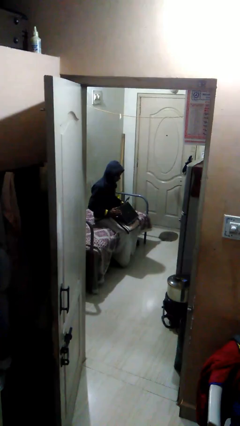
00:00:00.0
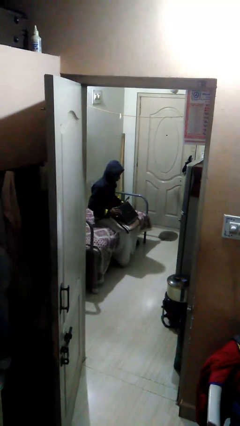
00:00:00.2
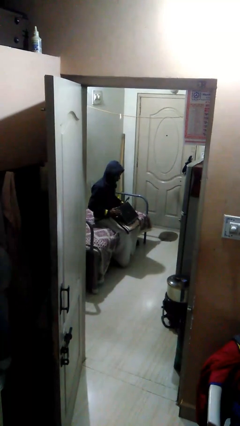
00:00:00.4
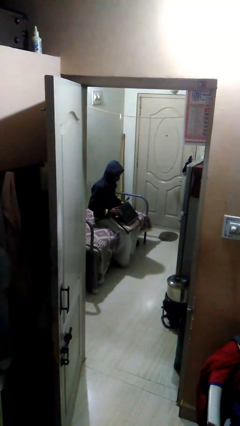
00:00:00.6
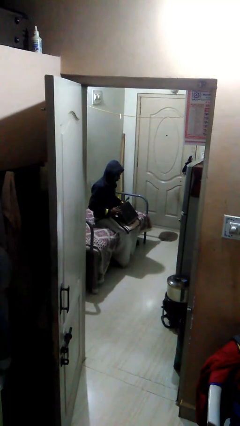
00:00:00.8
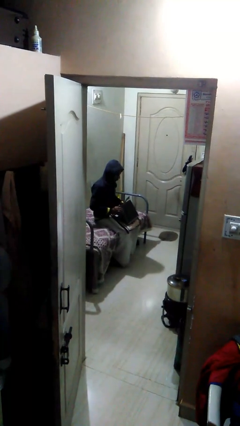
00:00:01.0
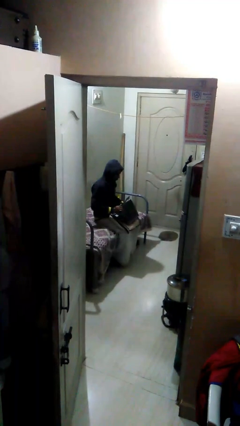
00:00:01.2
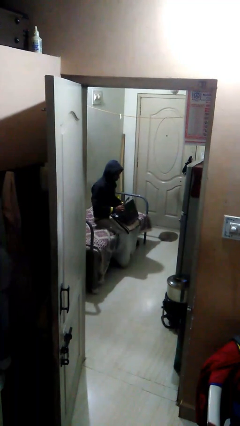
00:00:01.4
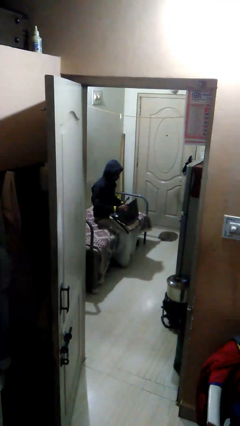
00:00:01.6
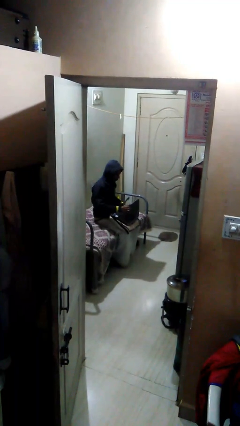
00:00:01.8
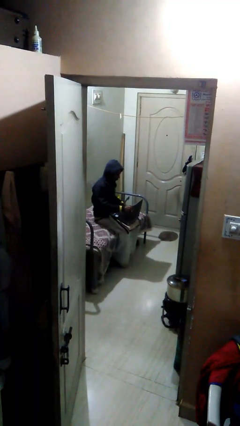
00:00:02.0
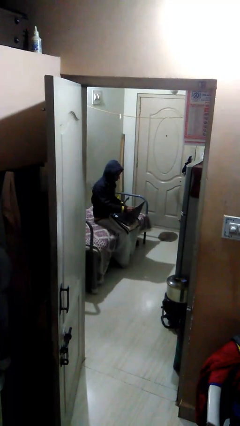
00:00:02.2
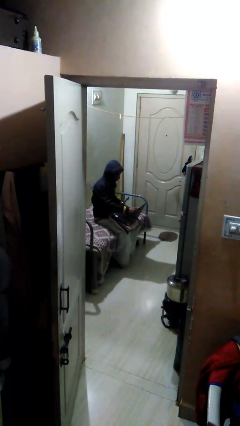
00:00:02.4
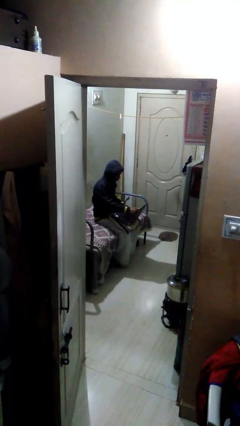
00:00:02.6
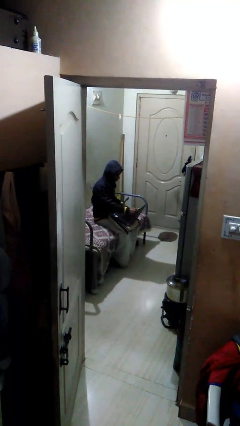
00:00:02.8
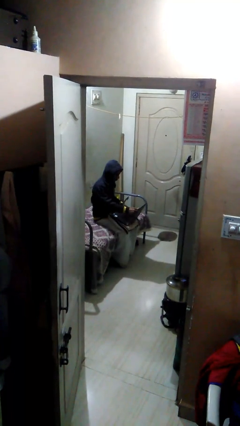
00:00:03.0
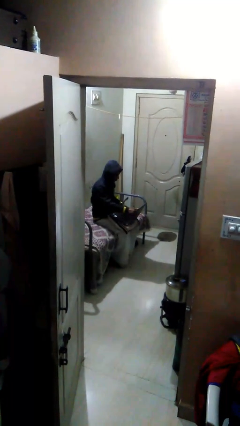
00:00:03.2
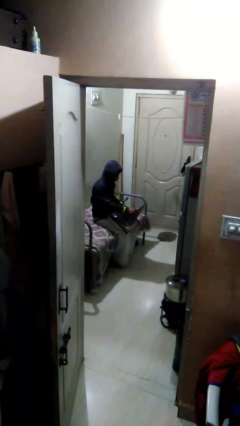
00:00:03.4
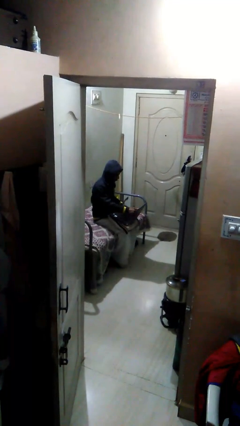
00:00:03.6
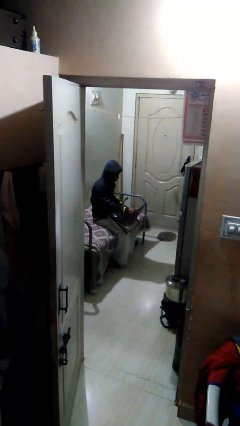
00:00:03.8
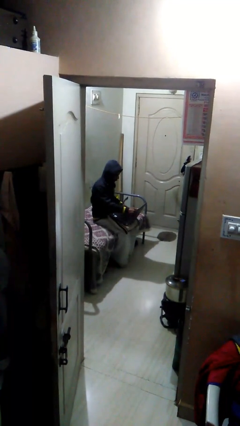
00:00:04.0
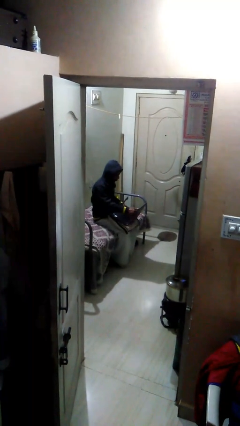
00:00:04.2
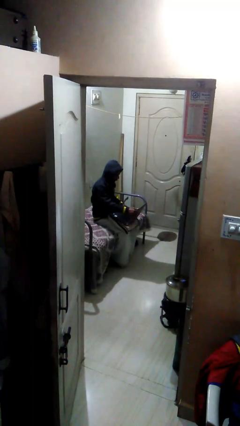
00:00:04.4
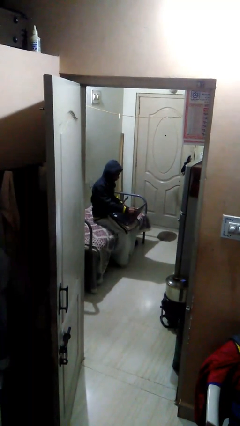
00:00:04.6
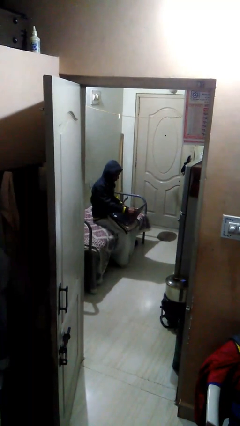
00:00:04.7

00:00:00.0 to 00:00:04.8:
person interacts with laptop

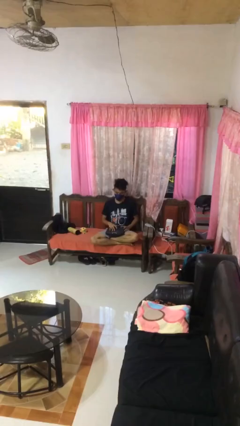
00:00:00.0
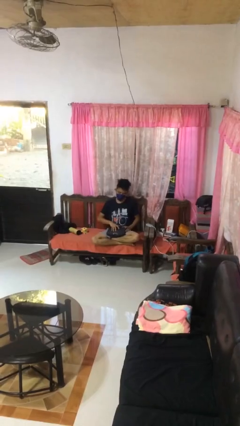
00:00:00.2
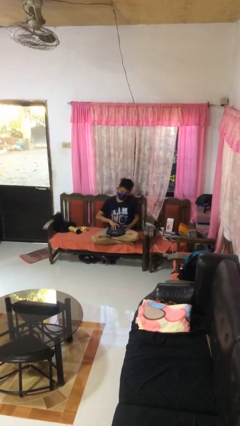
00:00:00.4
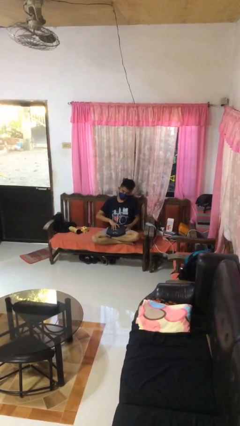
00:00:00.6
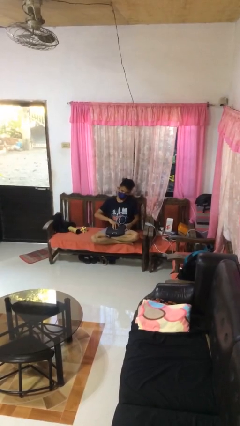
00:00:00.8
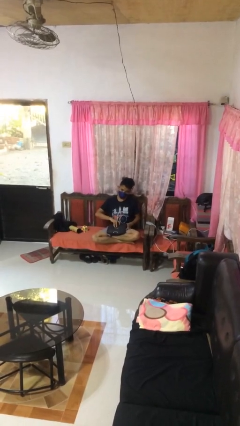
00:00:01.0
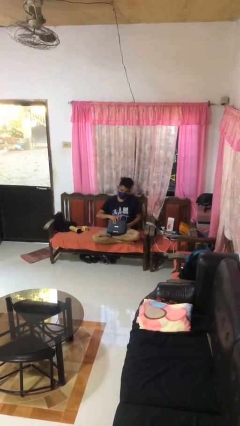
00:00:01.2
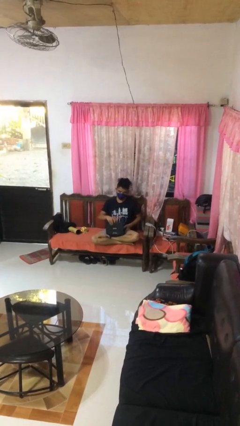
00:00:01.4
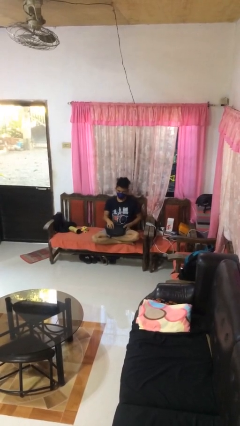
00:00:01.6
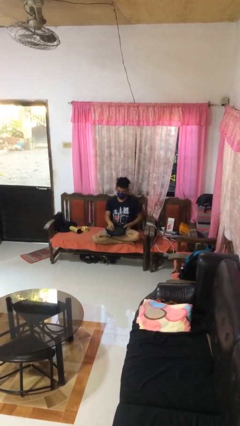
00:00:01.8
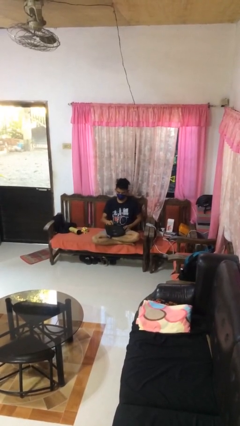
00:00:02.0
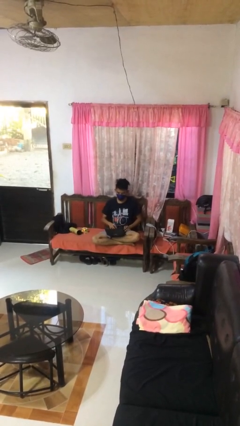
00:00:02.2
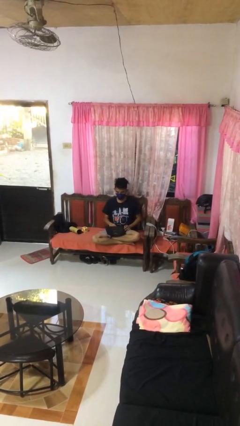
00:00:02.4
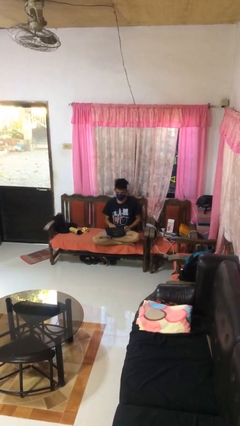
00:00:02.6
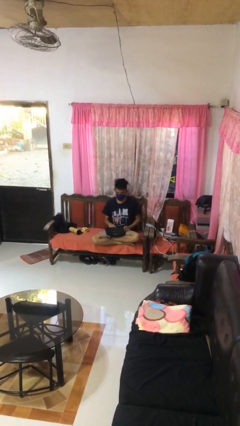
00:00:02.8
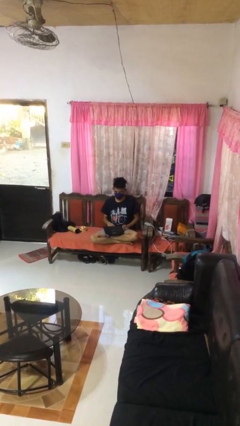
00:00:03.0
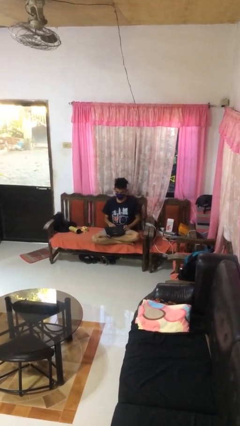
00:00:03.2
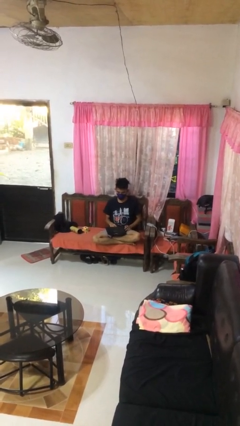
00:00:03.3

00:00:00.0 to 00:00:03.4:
person opens laptop

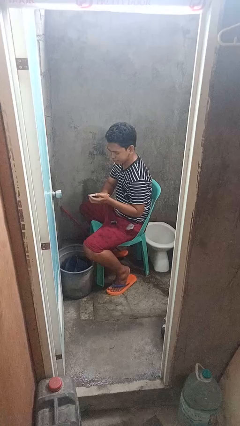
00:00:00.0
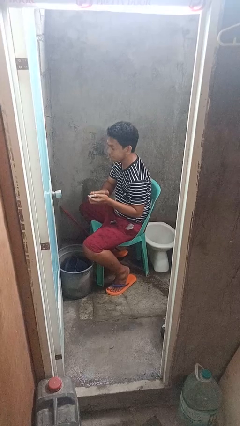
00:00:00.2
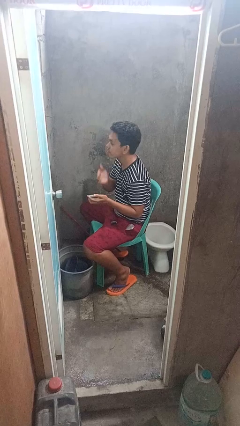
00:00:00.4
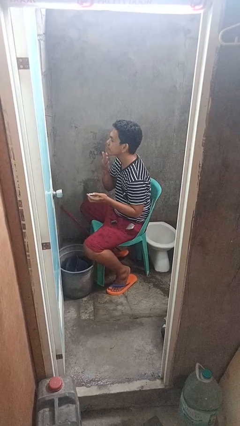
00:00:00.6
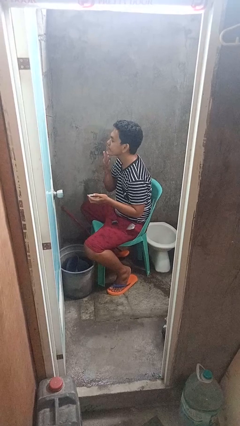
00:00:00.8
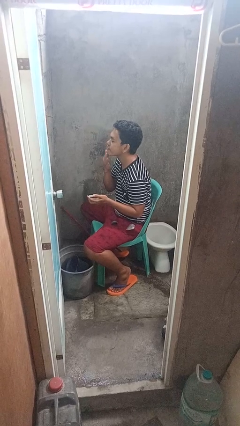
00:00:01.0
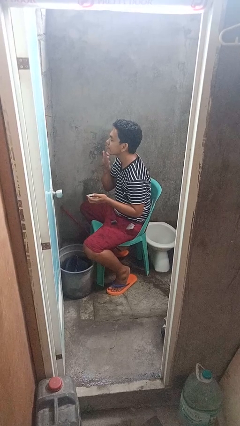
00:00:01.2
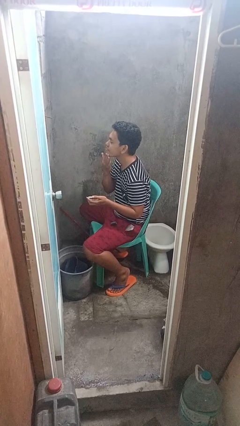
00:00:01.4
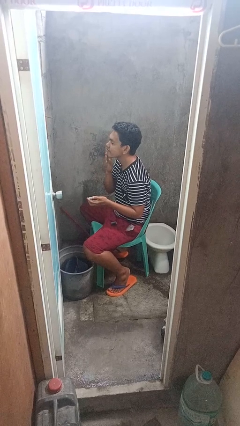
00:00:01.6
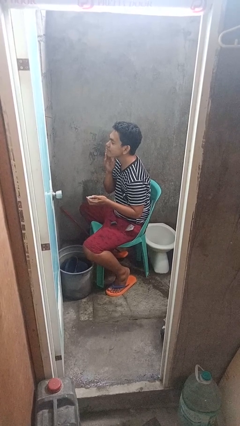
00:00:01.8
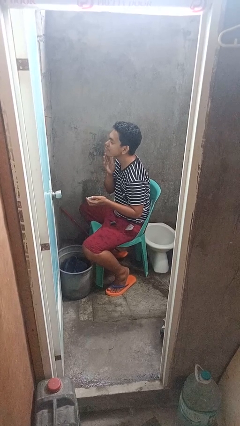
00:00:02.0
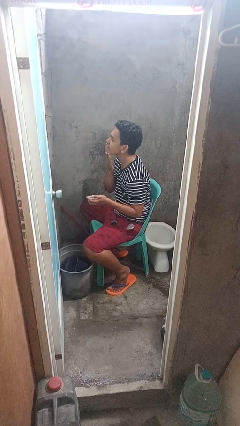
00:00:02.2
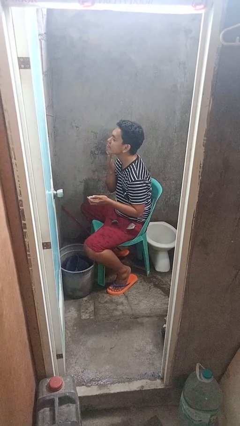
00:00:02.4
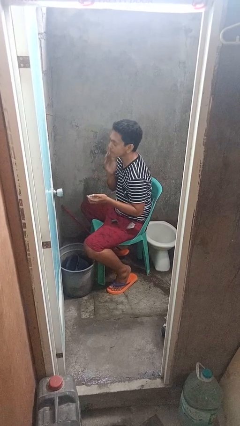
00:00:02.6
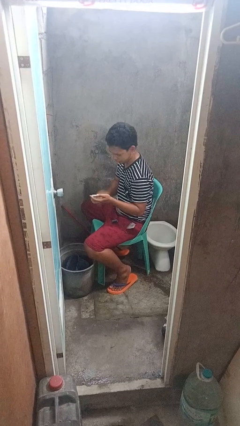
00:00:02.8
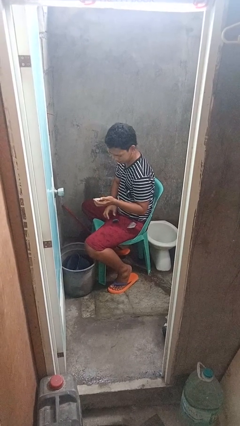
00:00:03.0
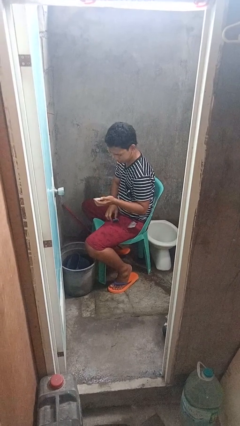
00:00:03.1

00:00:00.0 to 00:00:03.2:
person applies shaving cream

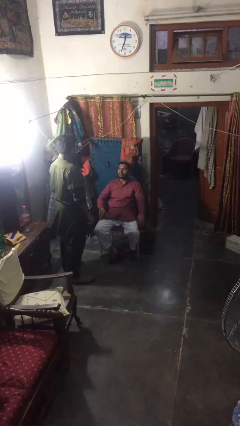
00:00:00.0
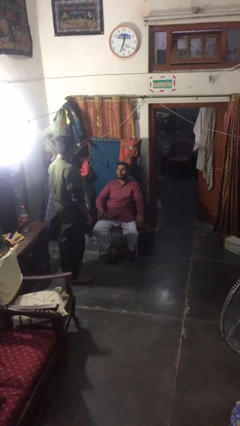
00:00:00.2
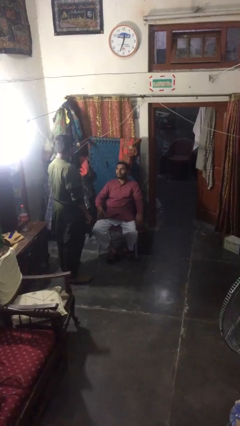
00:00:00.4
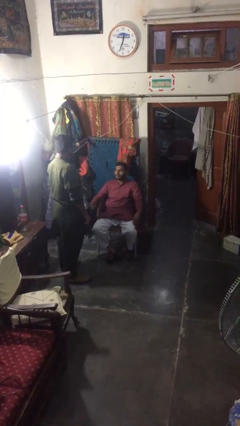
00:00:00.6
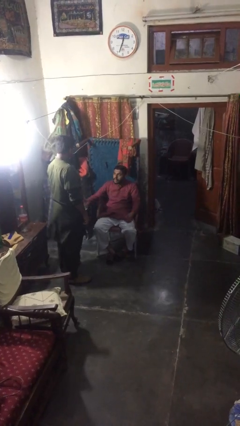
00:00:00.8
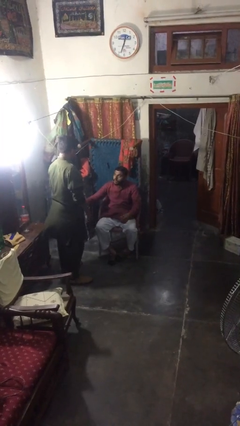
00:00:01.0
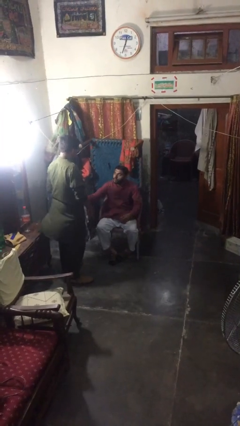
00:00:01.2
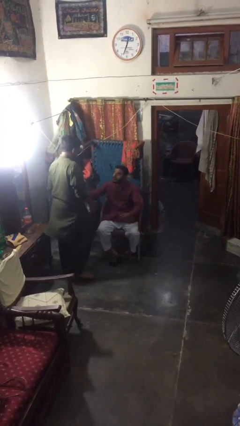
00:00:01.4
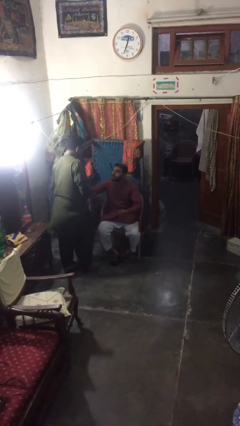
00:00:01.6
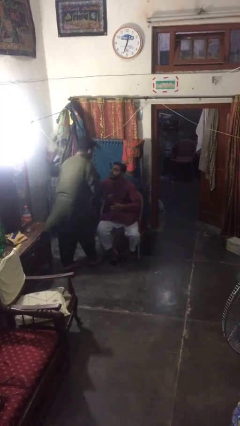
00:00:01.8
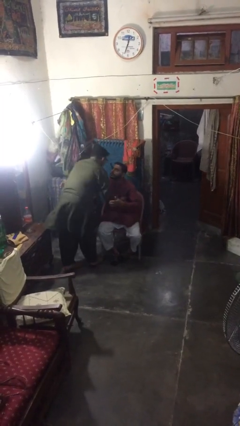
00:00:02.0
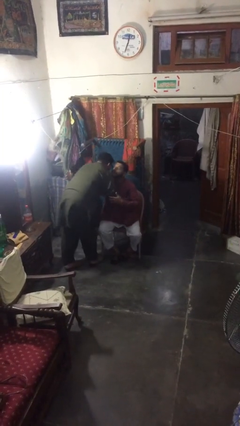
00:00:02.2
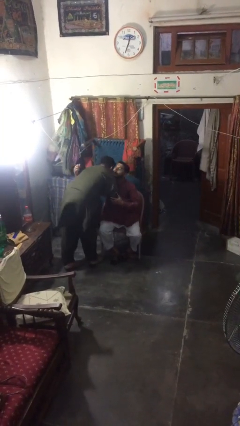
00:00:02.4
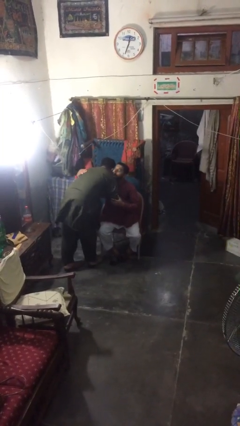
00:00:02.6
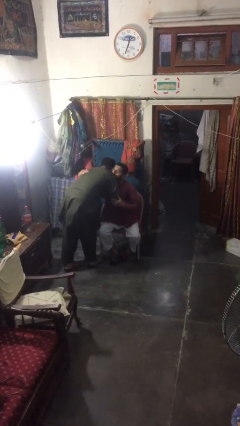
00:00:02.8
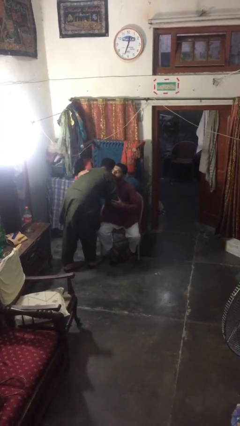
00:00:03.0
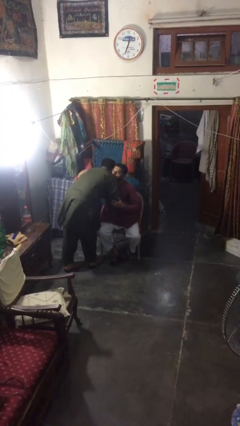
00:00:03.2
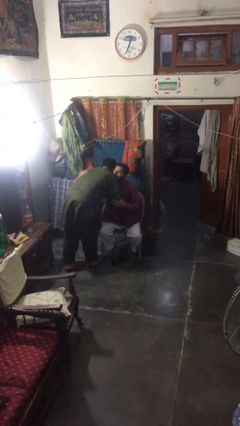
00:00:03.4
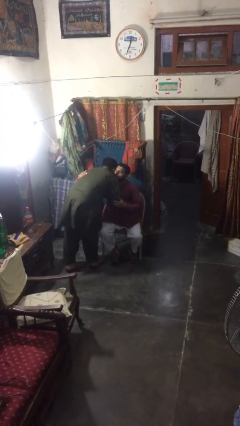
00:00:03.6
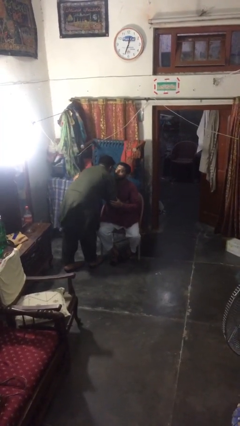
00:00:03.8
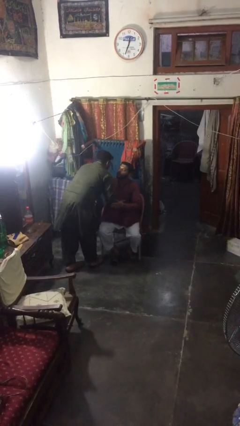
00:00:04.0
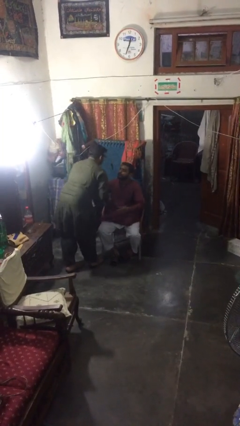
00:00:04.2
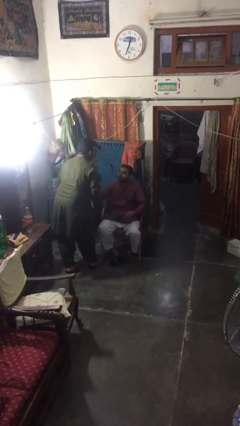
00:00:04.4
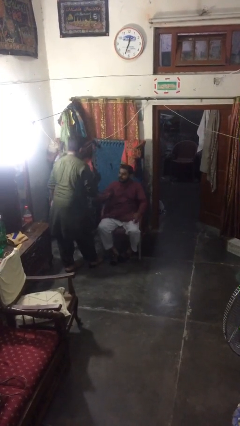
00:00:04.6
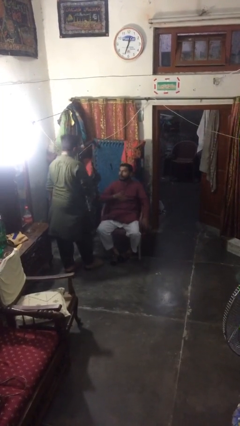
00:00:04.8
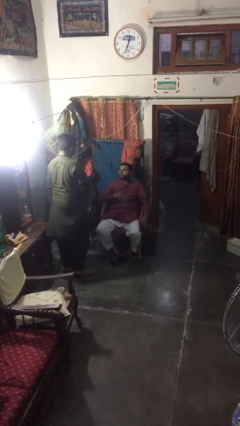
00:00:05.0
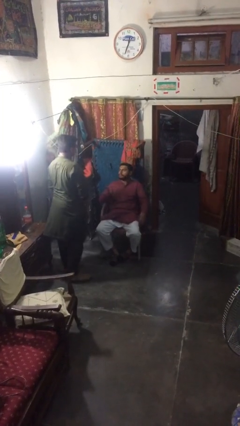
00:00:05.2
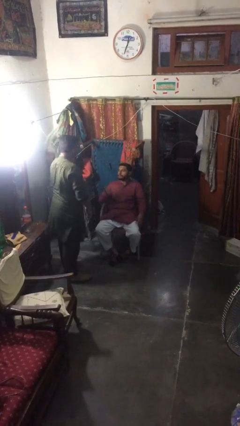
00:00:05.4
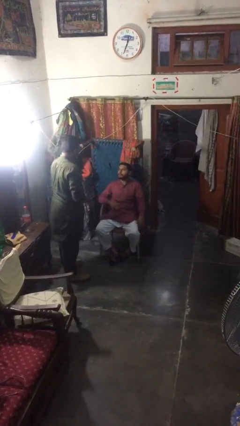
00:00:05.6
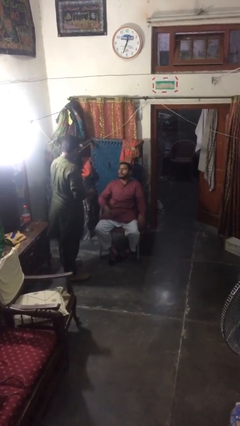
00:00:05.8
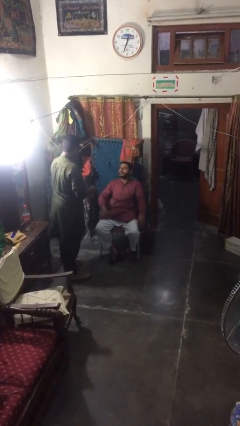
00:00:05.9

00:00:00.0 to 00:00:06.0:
person embraces person

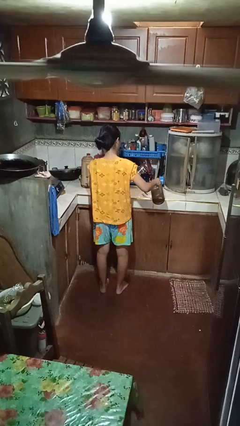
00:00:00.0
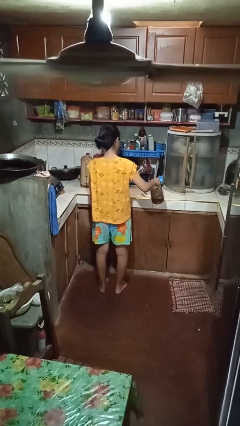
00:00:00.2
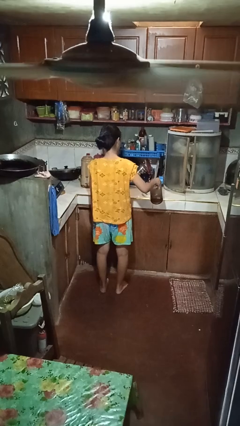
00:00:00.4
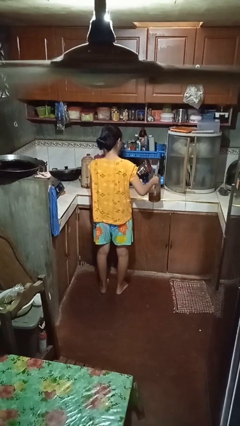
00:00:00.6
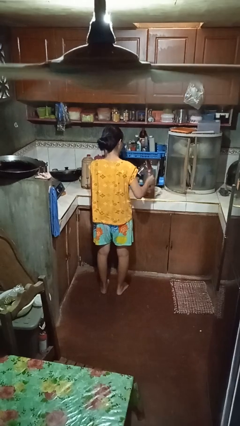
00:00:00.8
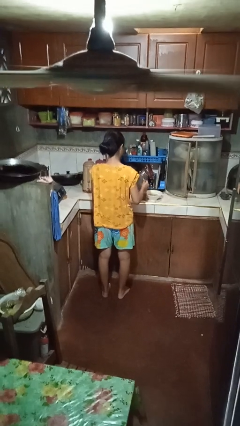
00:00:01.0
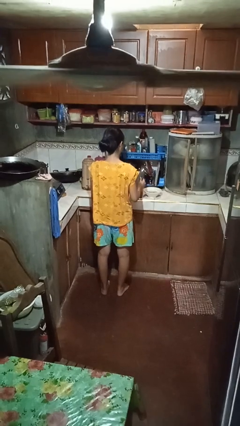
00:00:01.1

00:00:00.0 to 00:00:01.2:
person pours into bowl
